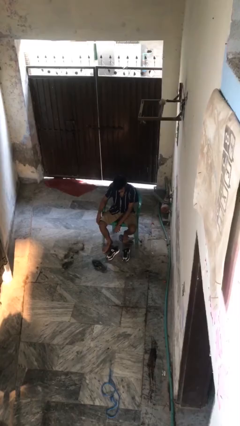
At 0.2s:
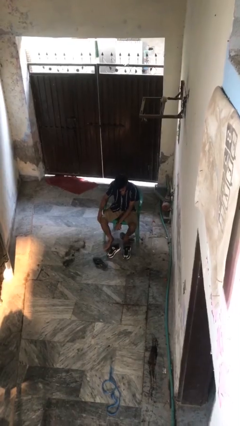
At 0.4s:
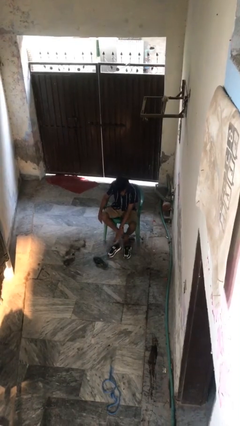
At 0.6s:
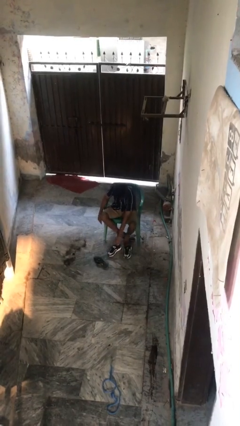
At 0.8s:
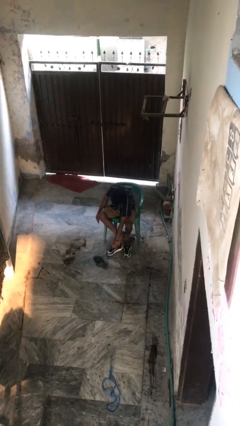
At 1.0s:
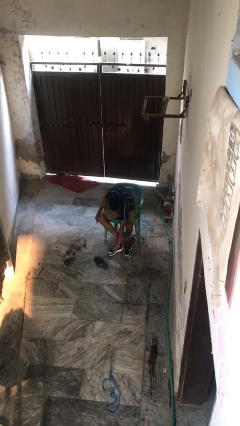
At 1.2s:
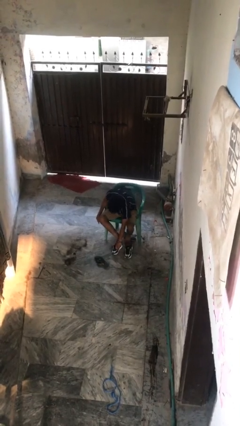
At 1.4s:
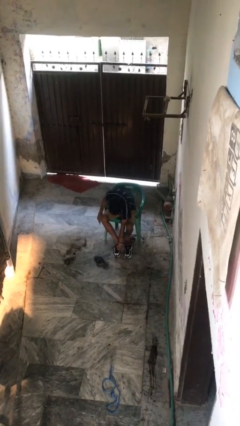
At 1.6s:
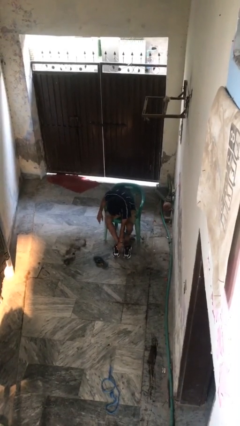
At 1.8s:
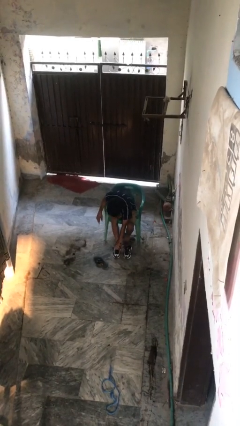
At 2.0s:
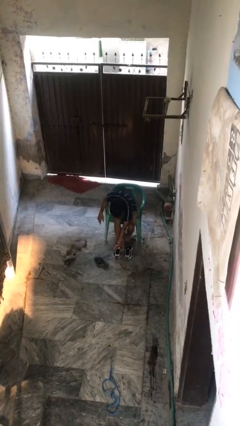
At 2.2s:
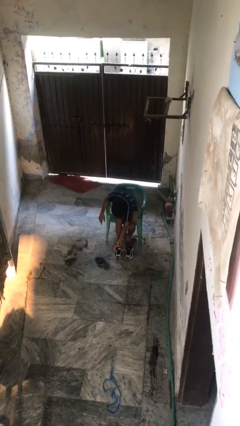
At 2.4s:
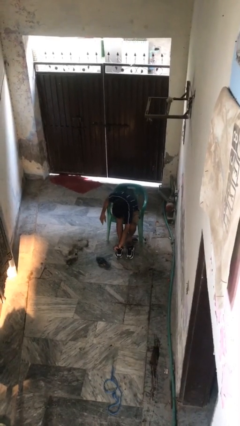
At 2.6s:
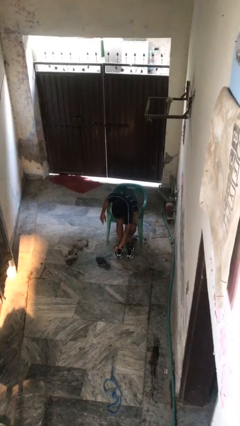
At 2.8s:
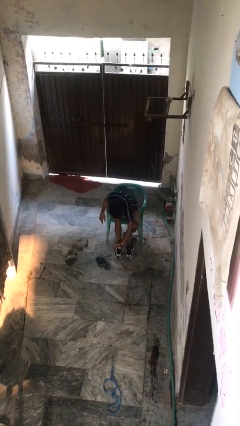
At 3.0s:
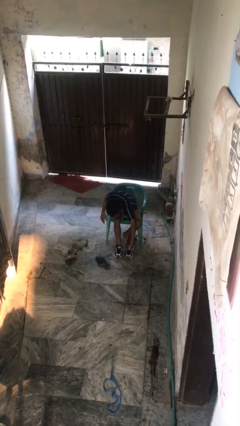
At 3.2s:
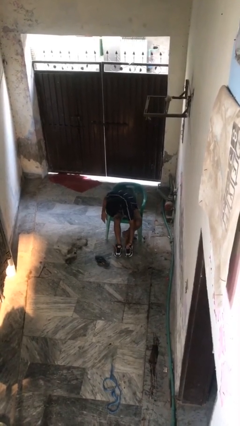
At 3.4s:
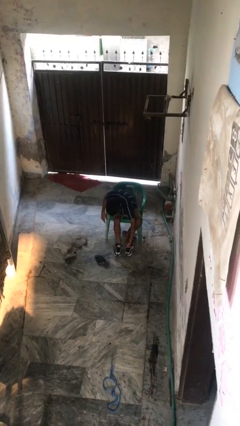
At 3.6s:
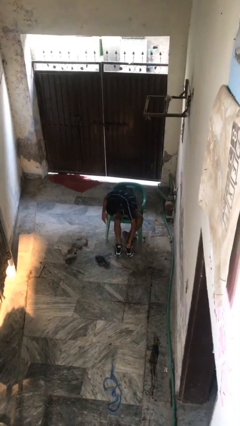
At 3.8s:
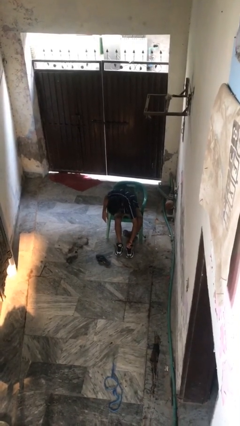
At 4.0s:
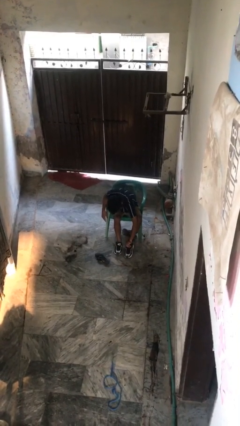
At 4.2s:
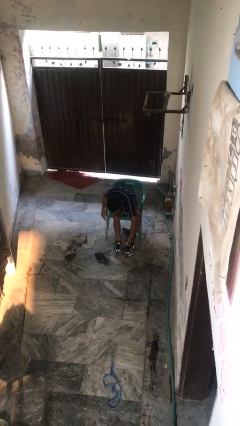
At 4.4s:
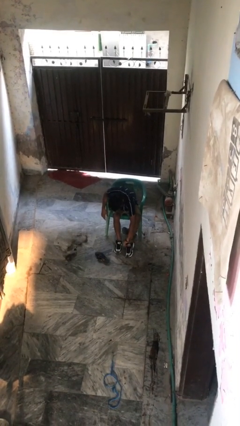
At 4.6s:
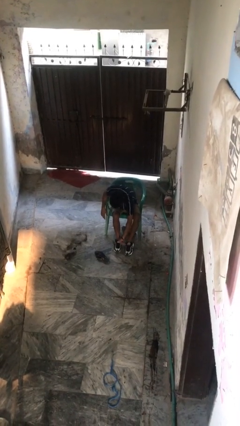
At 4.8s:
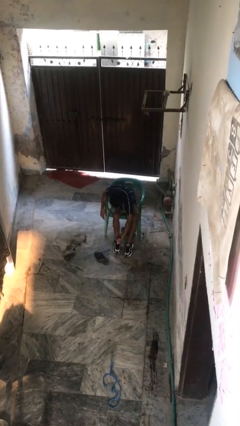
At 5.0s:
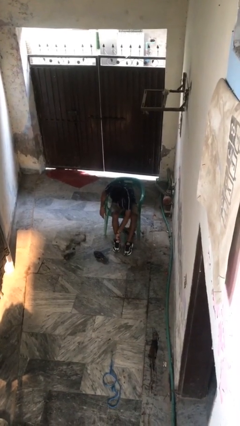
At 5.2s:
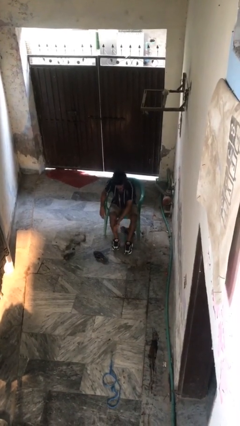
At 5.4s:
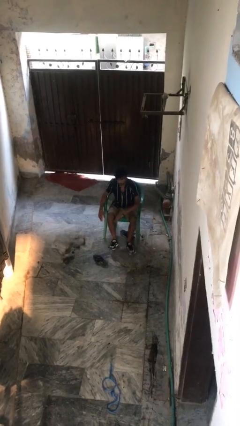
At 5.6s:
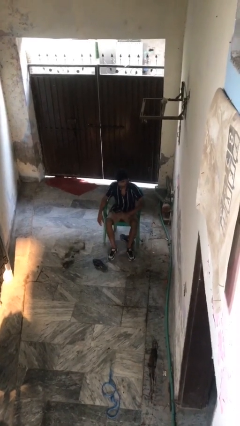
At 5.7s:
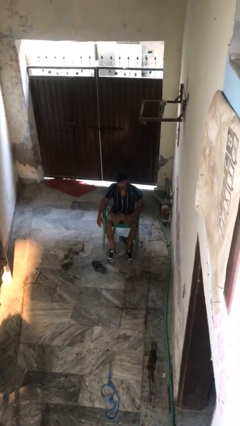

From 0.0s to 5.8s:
person puts on shoes

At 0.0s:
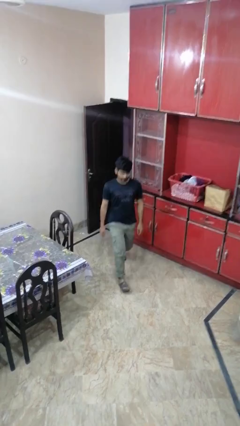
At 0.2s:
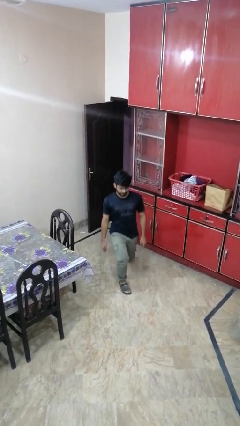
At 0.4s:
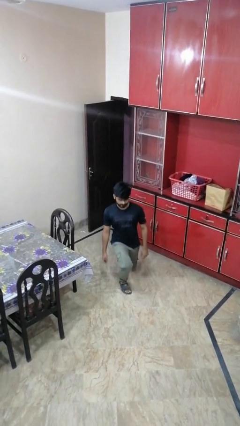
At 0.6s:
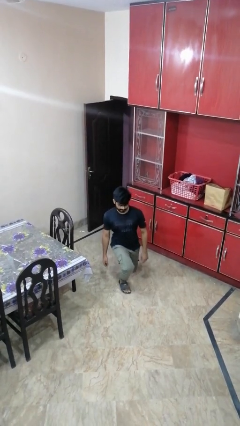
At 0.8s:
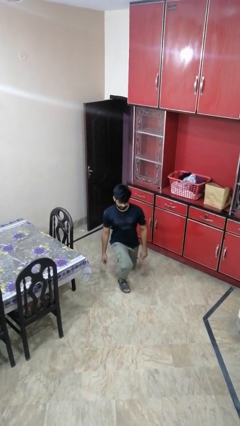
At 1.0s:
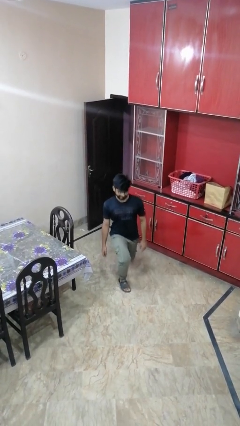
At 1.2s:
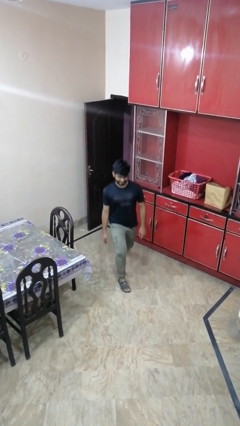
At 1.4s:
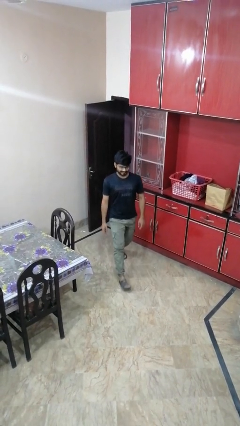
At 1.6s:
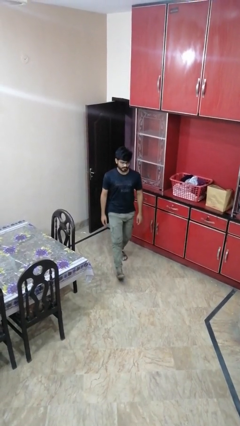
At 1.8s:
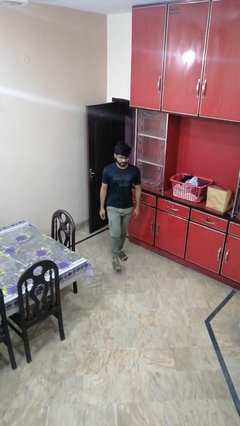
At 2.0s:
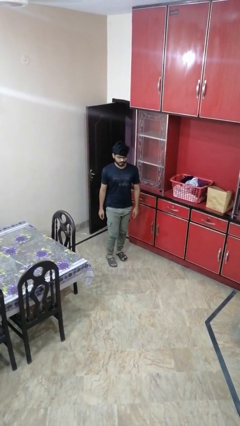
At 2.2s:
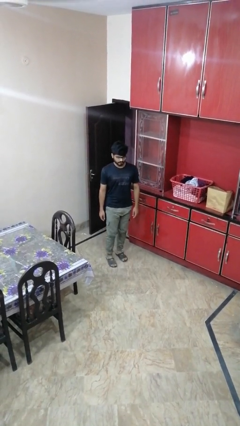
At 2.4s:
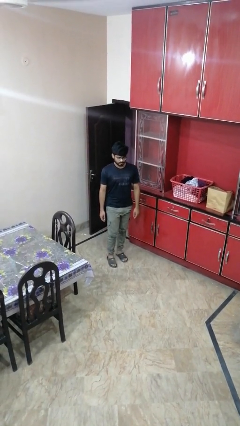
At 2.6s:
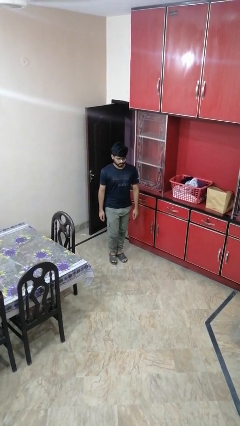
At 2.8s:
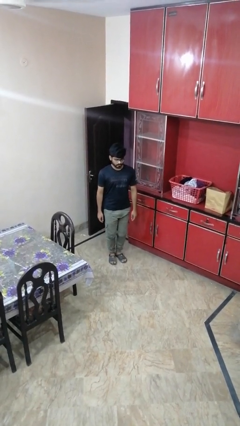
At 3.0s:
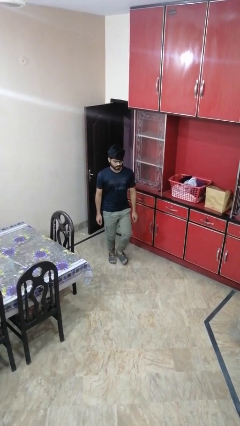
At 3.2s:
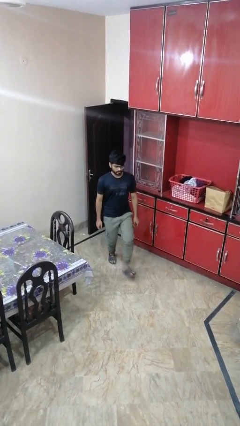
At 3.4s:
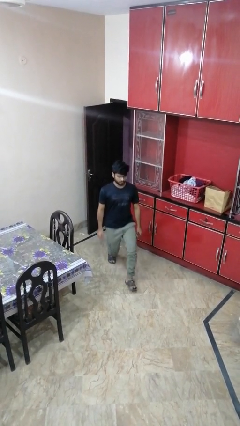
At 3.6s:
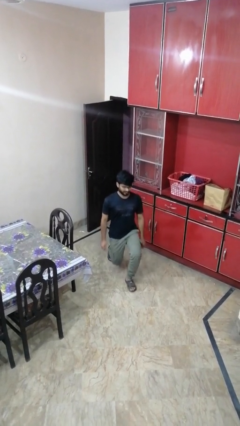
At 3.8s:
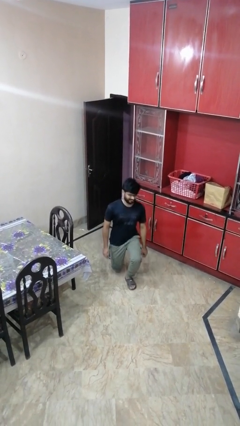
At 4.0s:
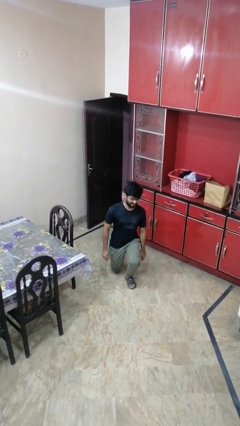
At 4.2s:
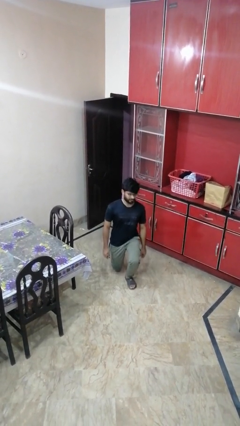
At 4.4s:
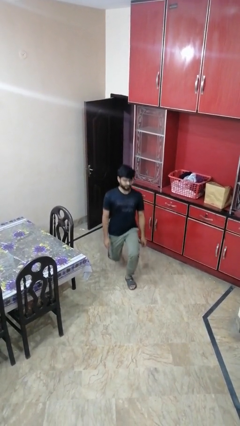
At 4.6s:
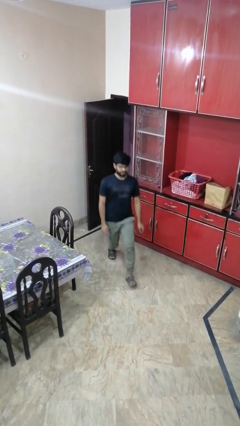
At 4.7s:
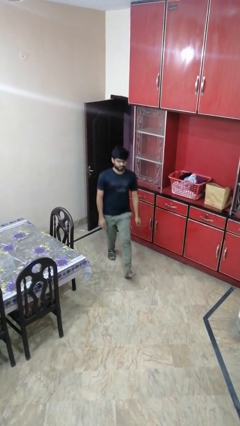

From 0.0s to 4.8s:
person exercises with lunges

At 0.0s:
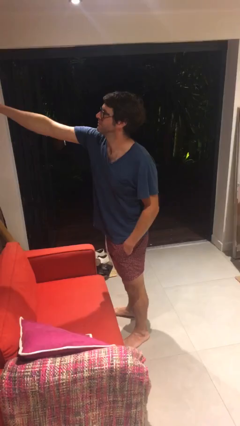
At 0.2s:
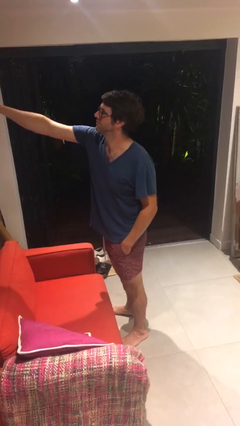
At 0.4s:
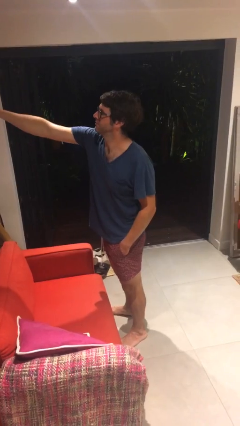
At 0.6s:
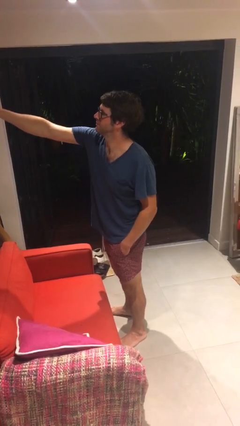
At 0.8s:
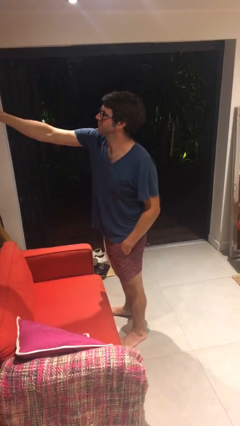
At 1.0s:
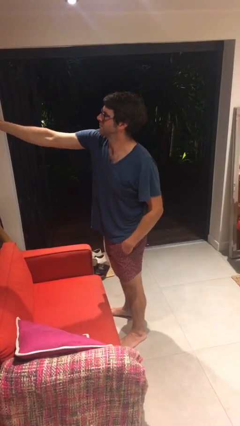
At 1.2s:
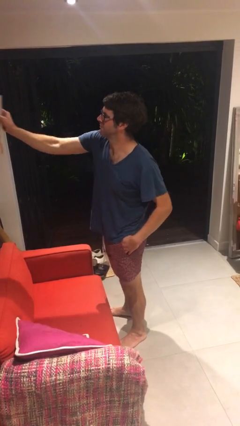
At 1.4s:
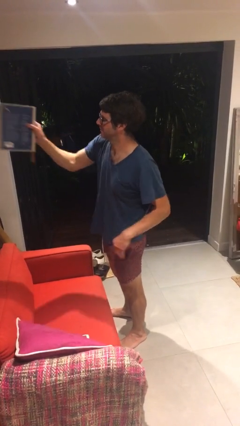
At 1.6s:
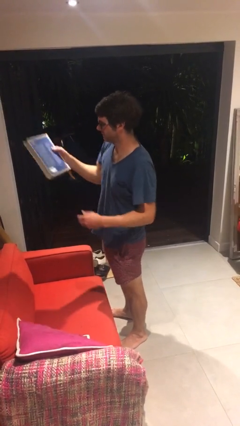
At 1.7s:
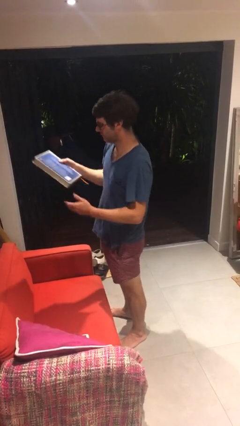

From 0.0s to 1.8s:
person picks up object from shelf

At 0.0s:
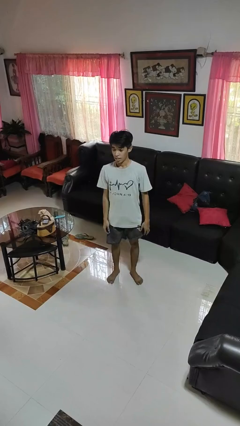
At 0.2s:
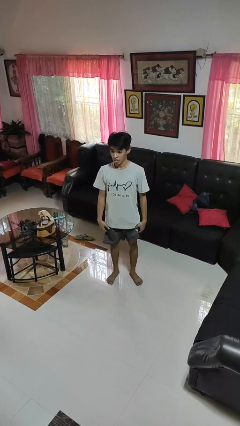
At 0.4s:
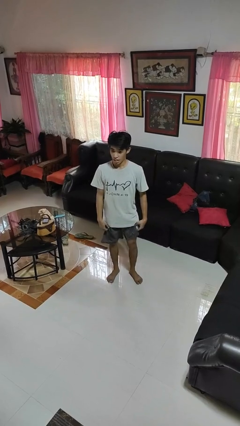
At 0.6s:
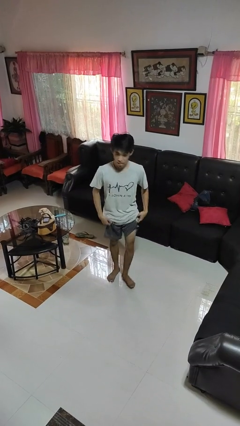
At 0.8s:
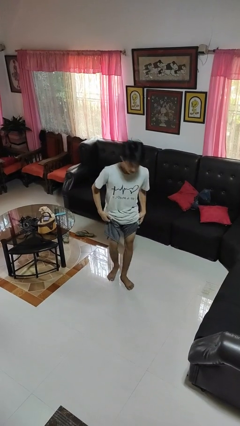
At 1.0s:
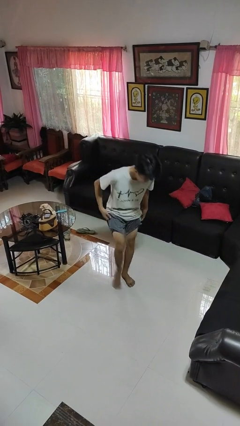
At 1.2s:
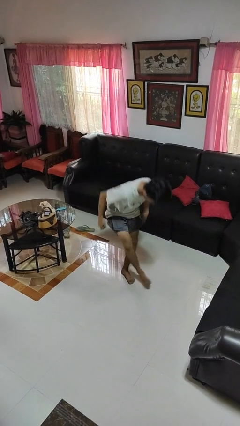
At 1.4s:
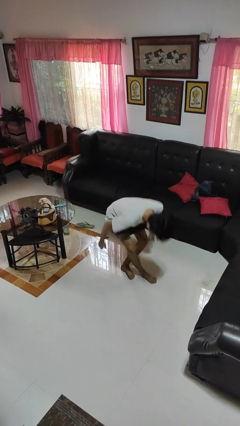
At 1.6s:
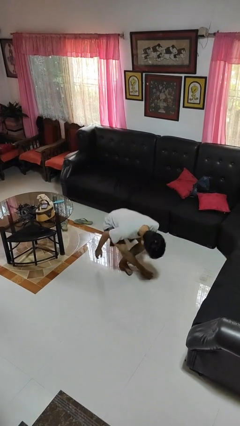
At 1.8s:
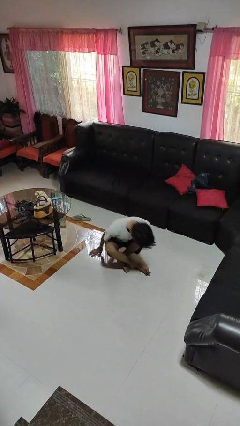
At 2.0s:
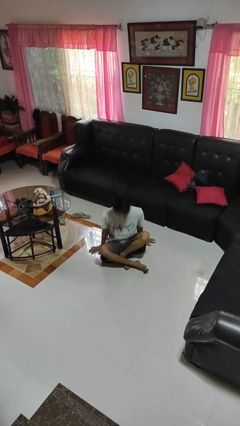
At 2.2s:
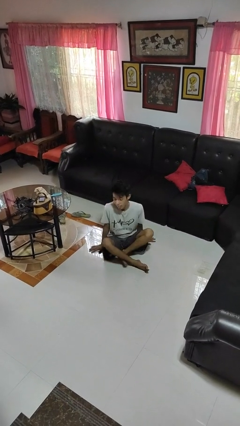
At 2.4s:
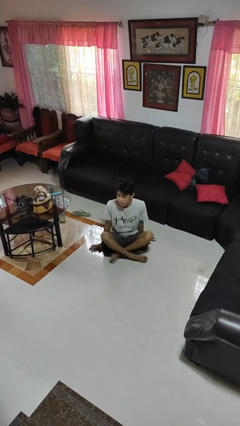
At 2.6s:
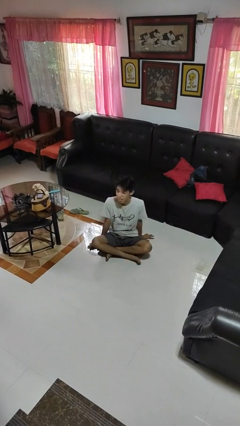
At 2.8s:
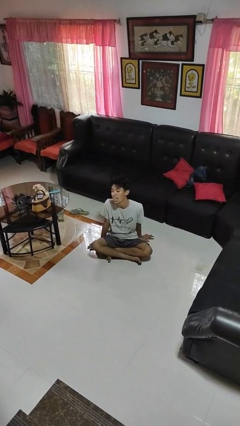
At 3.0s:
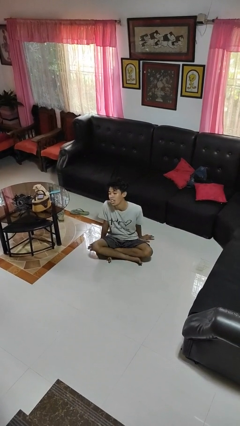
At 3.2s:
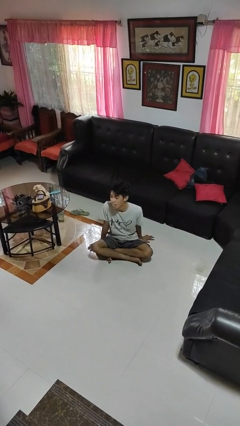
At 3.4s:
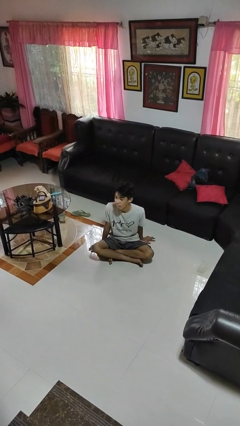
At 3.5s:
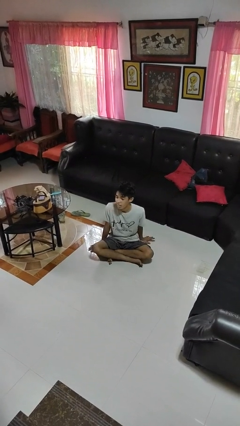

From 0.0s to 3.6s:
person sits crisscross

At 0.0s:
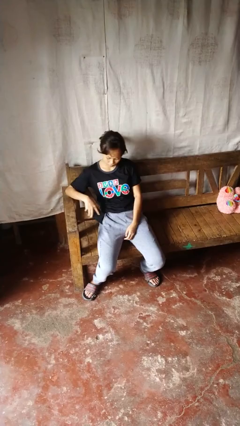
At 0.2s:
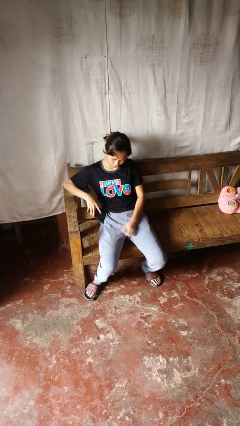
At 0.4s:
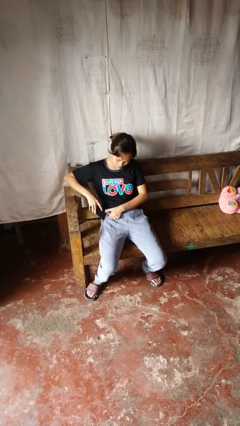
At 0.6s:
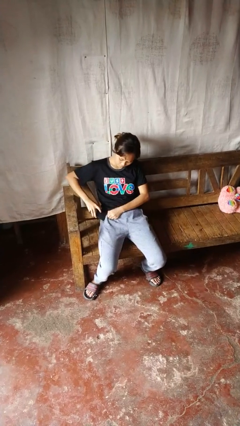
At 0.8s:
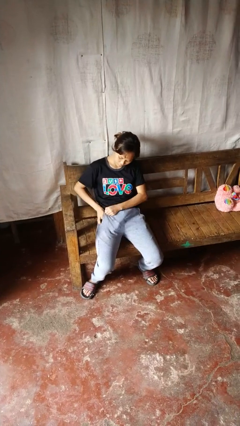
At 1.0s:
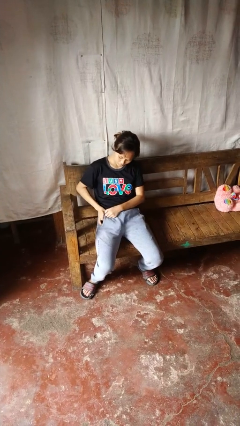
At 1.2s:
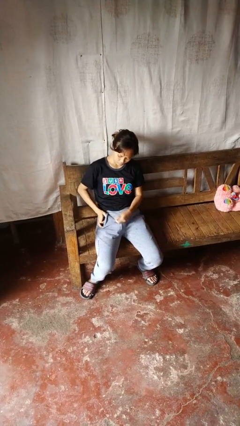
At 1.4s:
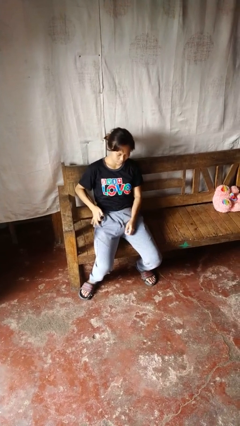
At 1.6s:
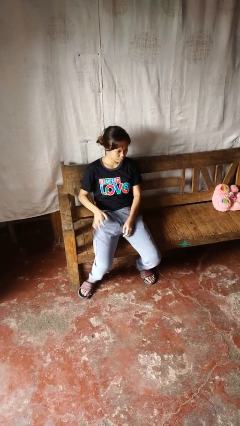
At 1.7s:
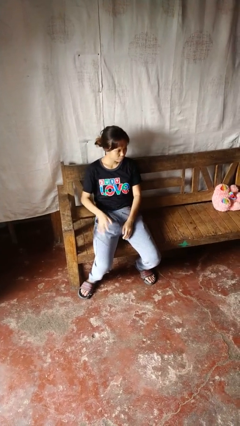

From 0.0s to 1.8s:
person puts phone into pocket

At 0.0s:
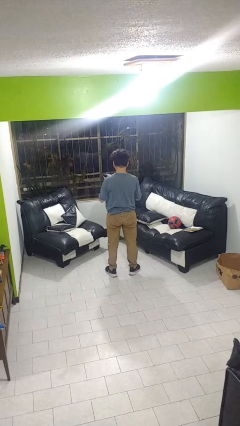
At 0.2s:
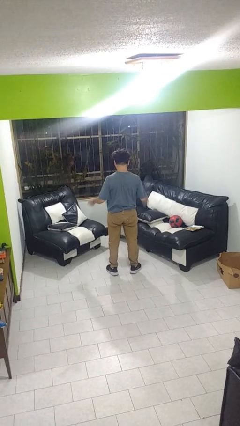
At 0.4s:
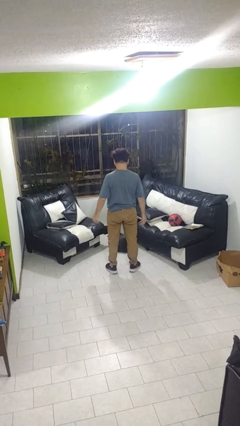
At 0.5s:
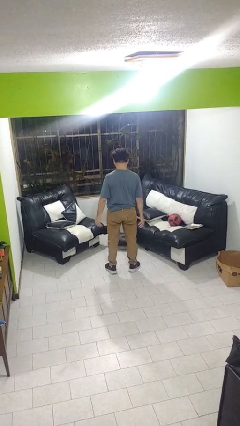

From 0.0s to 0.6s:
person drops object
